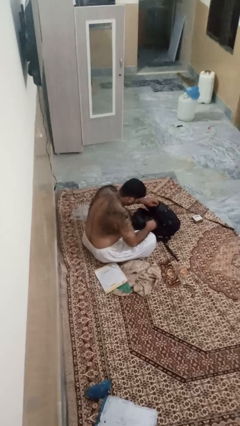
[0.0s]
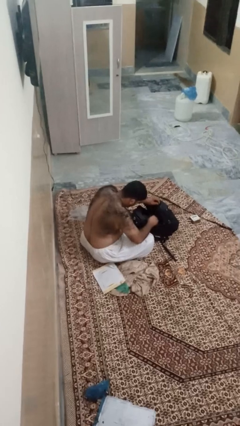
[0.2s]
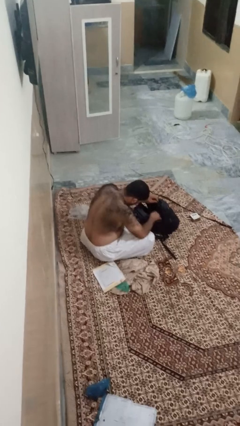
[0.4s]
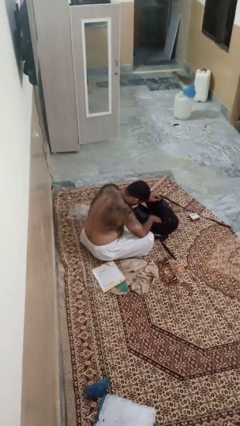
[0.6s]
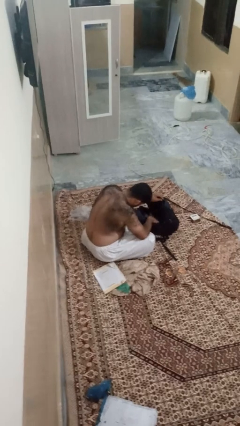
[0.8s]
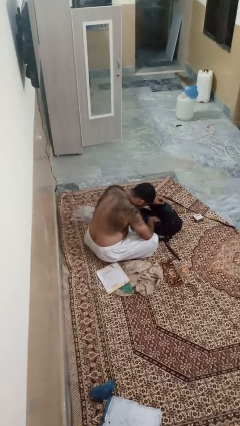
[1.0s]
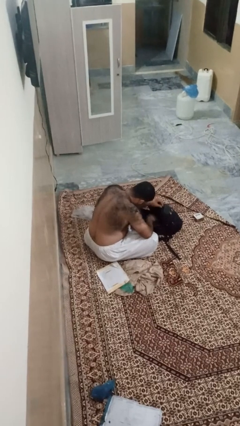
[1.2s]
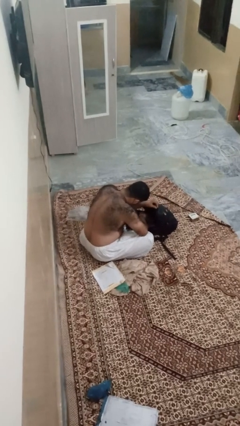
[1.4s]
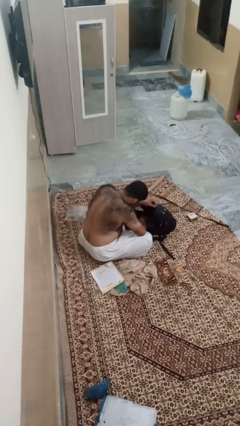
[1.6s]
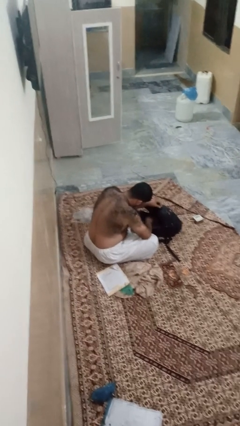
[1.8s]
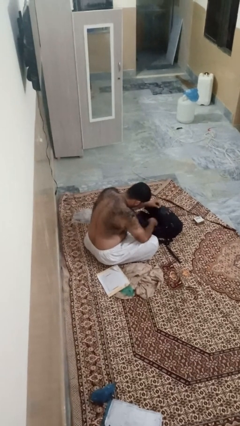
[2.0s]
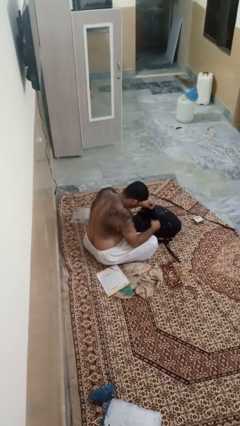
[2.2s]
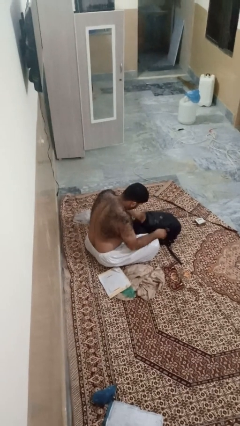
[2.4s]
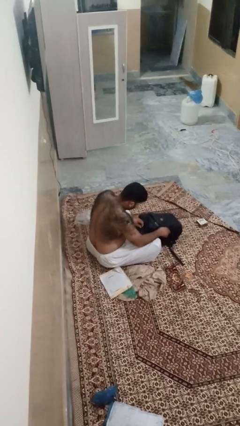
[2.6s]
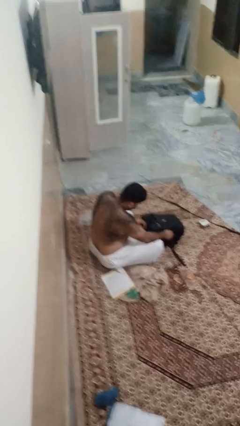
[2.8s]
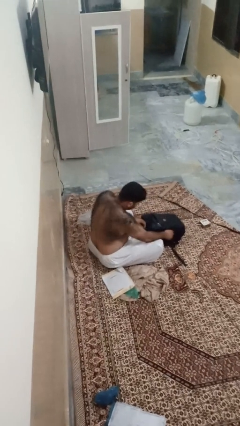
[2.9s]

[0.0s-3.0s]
person searches in bag

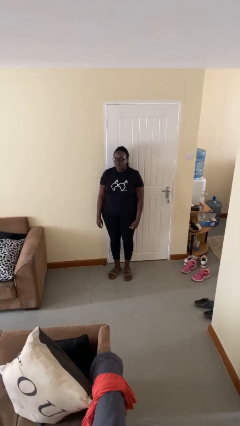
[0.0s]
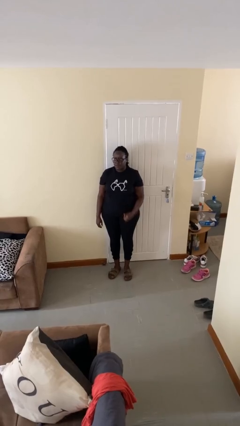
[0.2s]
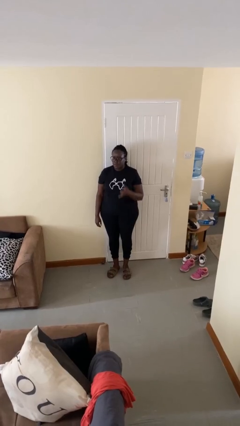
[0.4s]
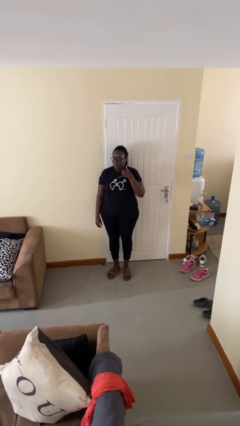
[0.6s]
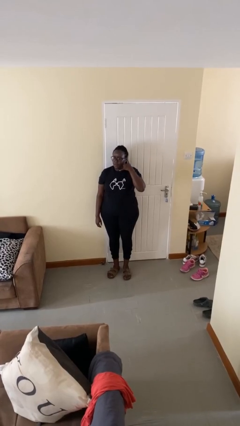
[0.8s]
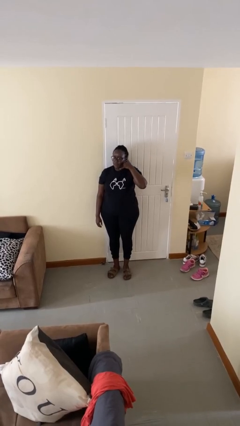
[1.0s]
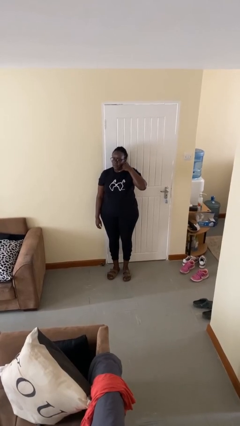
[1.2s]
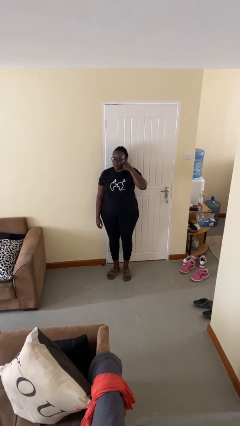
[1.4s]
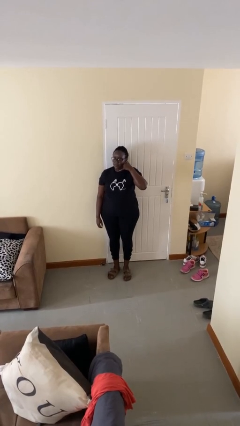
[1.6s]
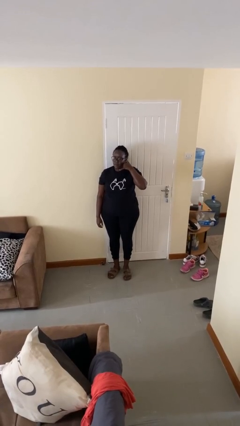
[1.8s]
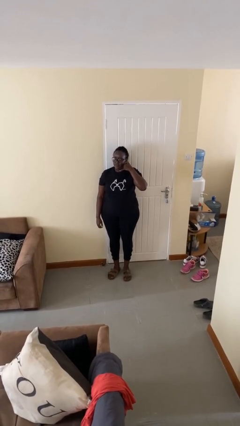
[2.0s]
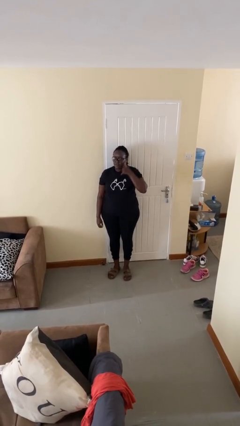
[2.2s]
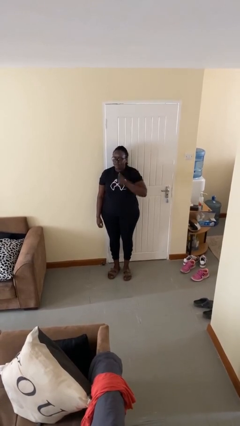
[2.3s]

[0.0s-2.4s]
person gestures call me

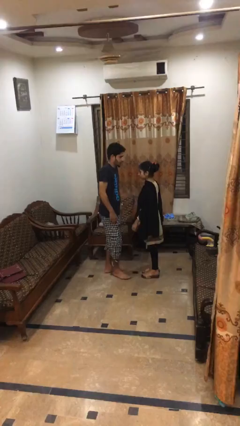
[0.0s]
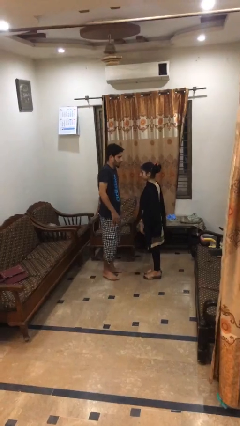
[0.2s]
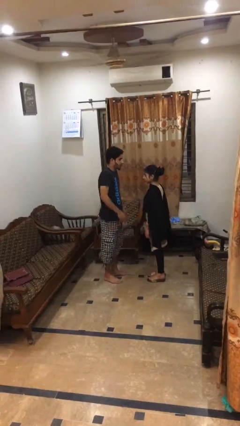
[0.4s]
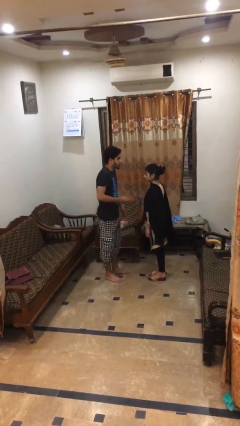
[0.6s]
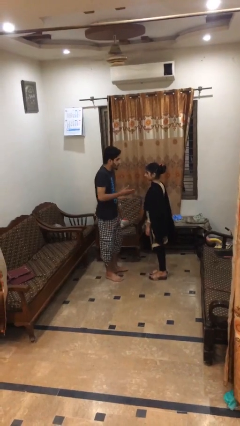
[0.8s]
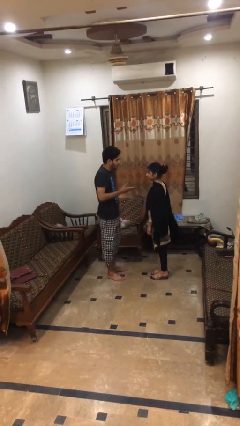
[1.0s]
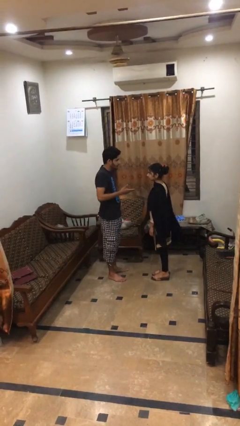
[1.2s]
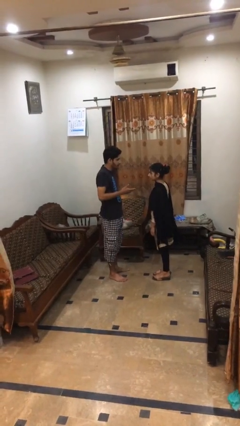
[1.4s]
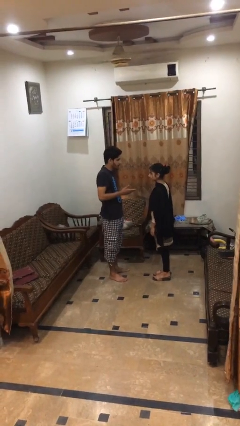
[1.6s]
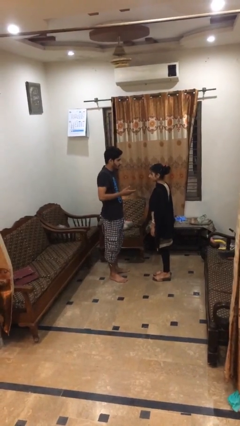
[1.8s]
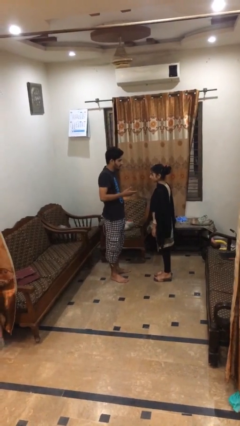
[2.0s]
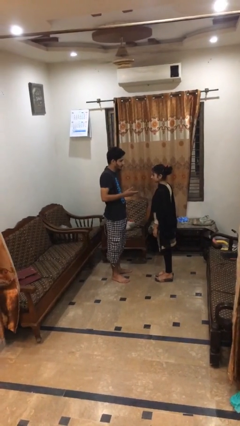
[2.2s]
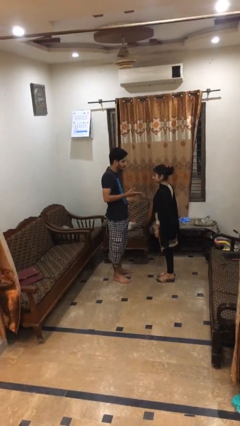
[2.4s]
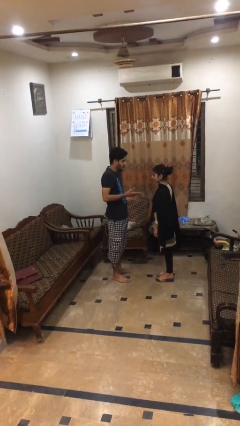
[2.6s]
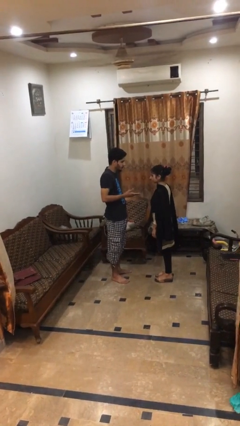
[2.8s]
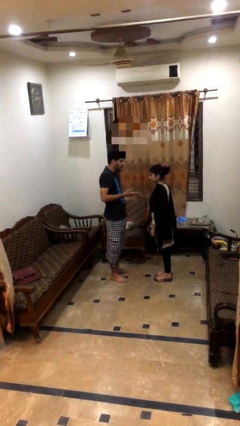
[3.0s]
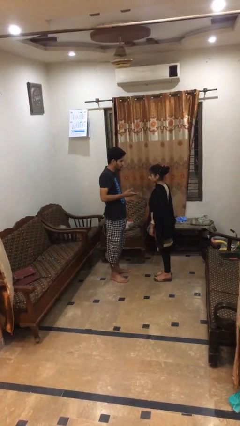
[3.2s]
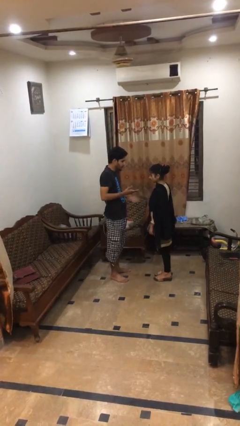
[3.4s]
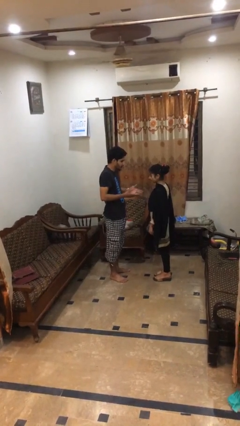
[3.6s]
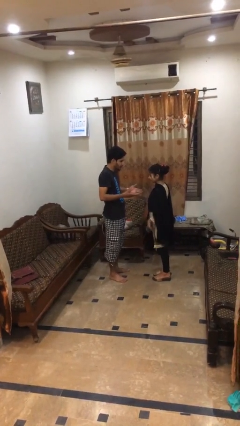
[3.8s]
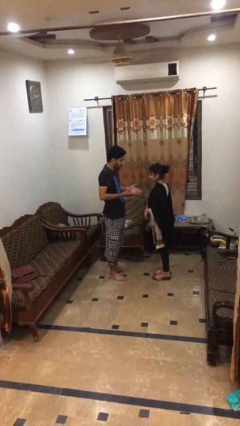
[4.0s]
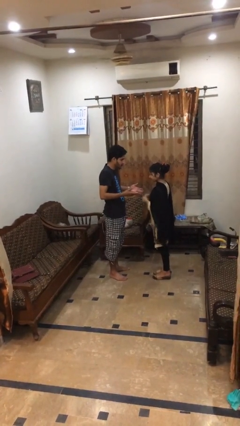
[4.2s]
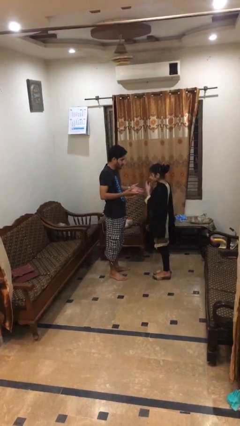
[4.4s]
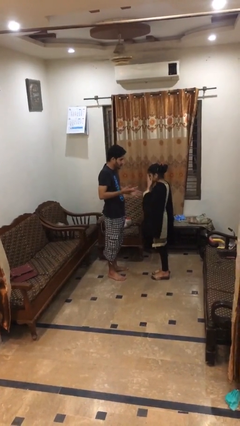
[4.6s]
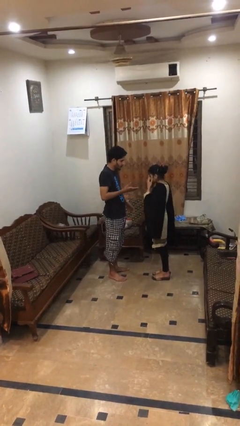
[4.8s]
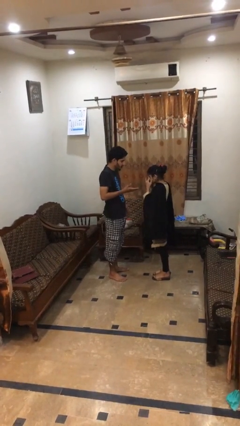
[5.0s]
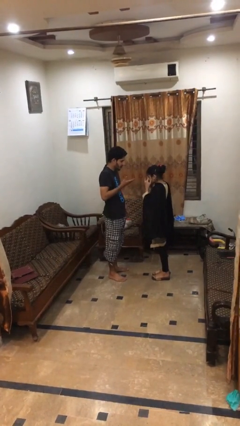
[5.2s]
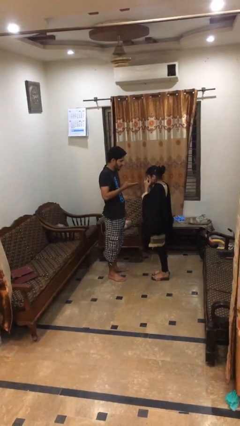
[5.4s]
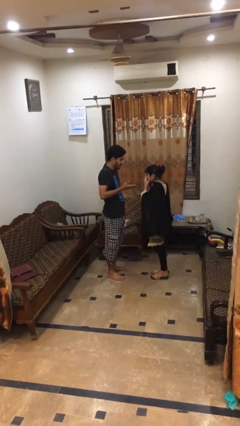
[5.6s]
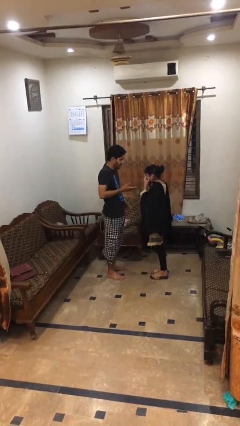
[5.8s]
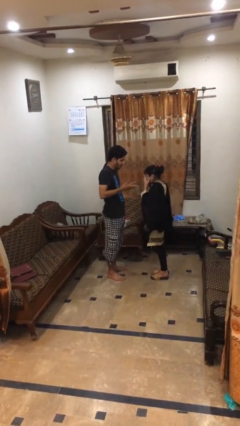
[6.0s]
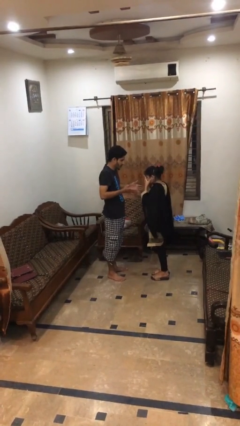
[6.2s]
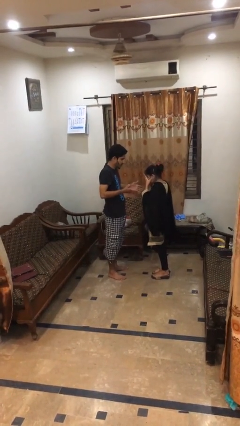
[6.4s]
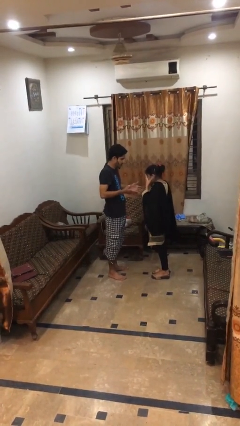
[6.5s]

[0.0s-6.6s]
person talks to person

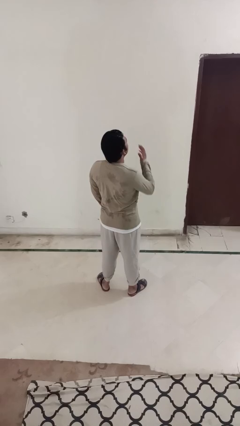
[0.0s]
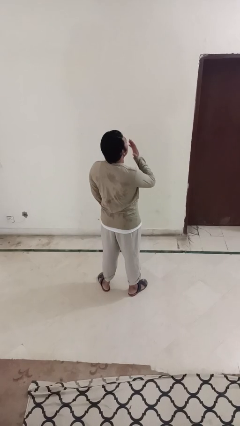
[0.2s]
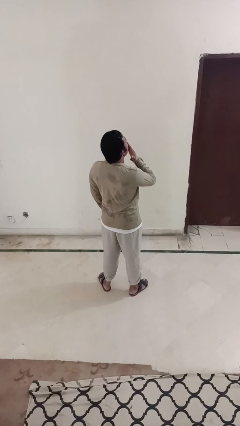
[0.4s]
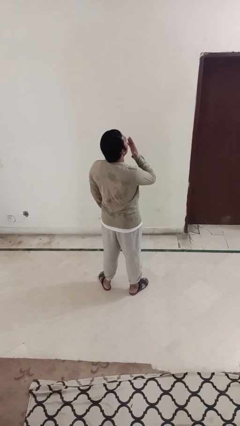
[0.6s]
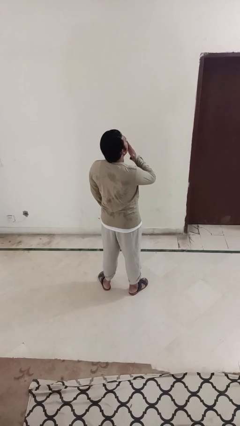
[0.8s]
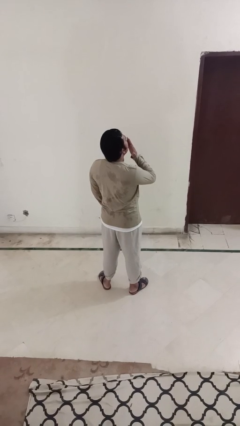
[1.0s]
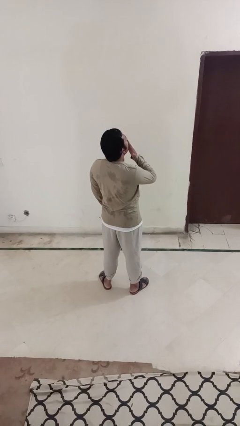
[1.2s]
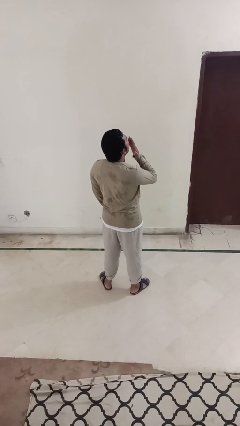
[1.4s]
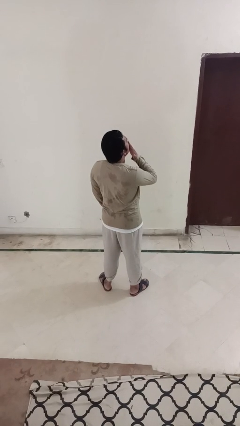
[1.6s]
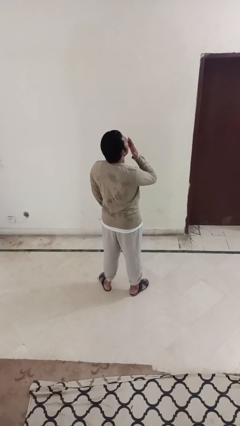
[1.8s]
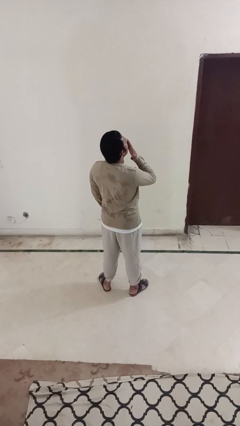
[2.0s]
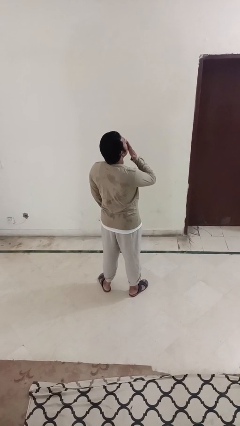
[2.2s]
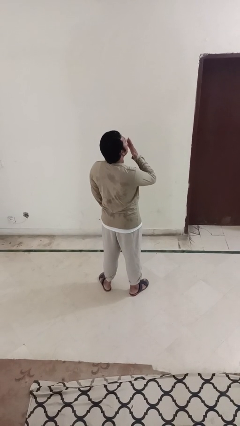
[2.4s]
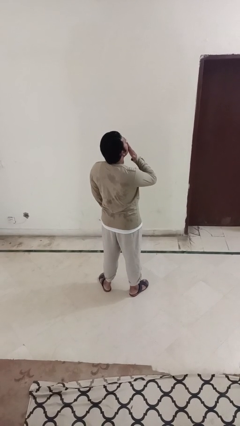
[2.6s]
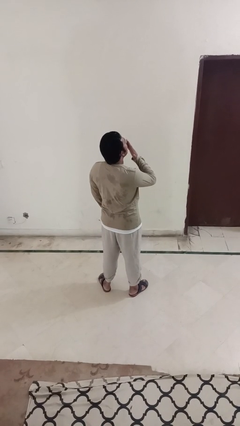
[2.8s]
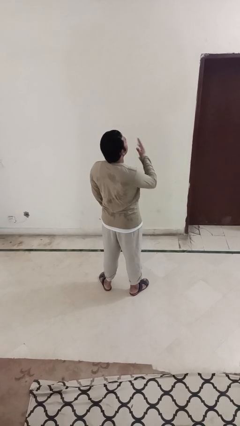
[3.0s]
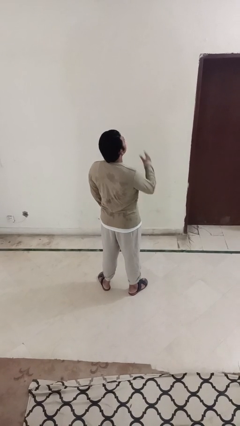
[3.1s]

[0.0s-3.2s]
person yawns

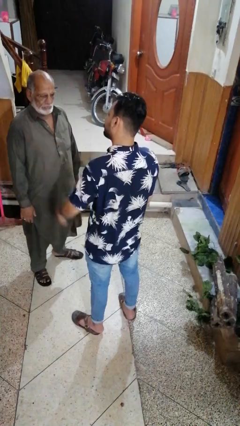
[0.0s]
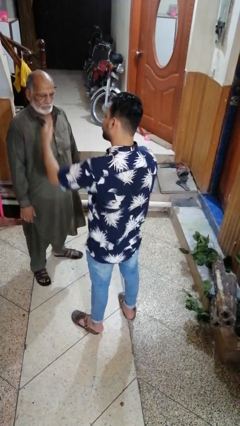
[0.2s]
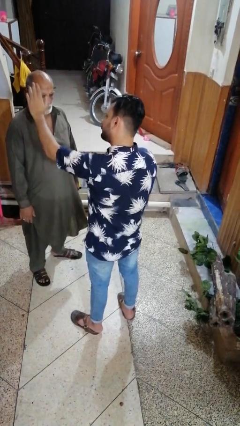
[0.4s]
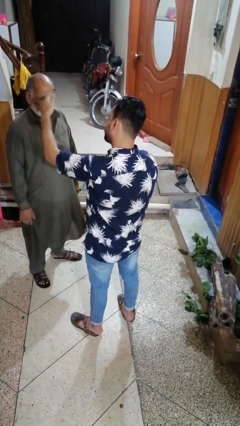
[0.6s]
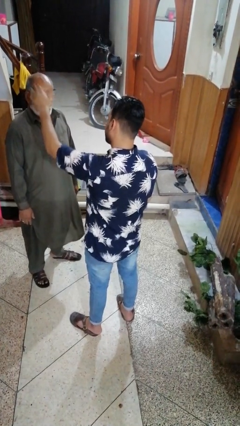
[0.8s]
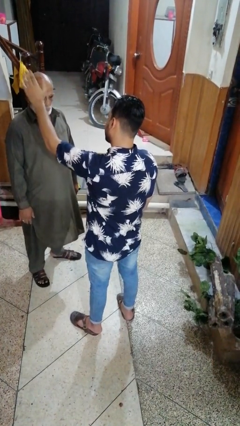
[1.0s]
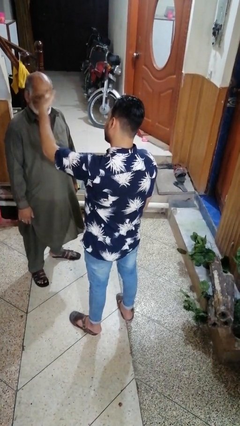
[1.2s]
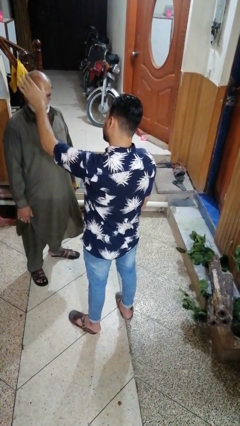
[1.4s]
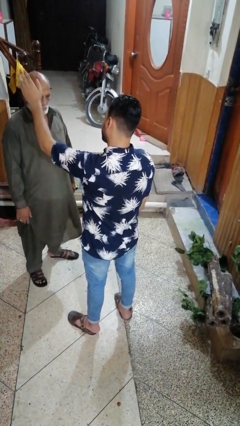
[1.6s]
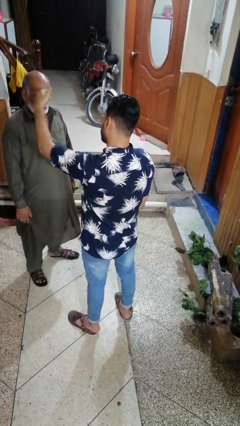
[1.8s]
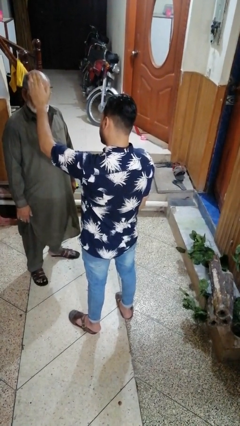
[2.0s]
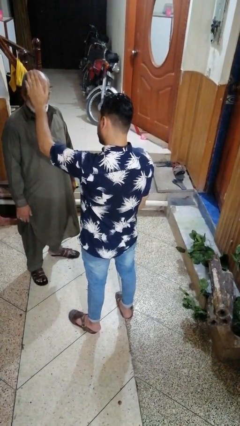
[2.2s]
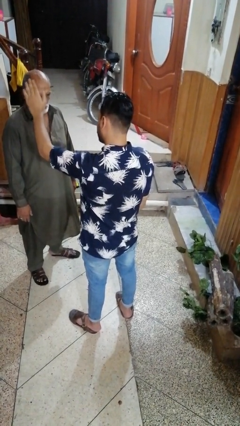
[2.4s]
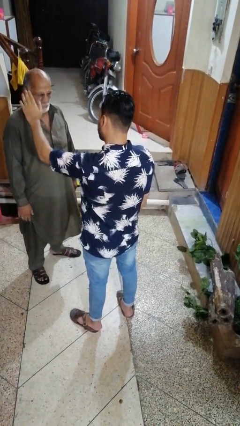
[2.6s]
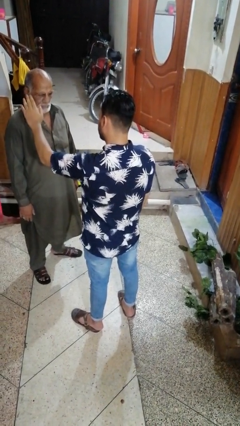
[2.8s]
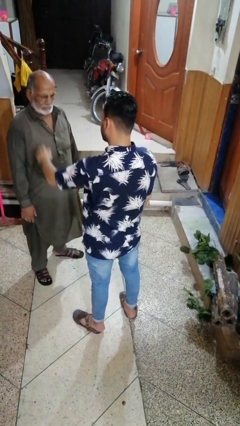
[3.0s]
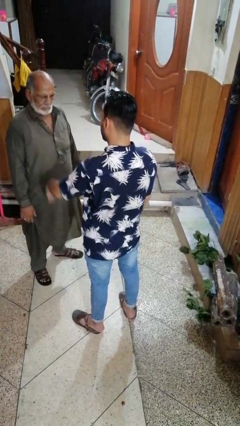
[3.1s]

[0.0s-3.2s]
person shoves person
